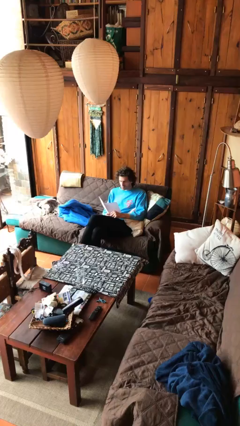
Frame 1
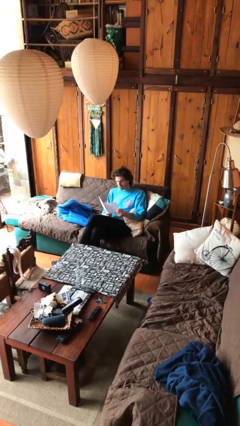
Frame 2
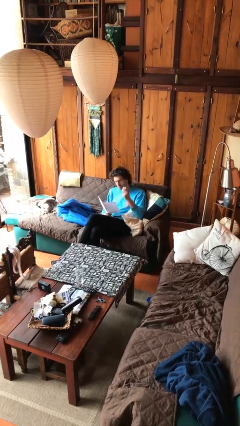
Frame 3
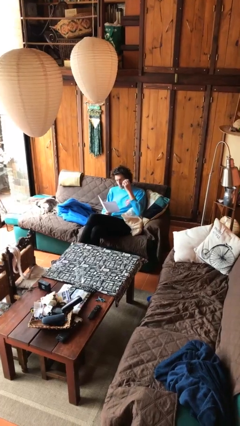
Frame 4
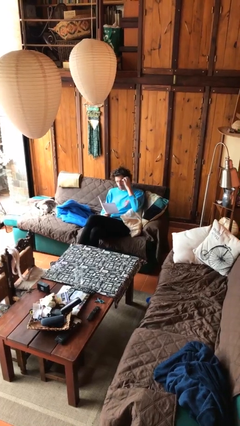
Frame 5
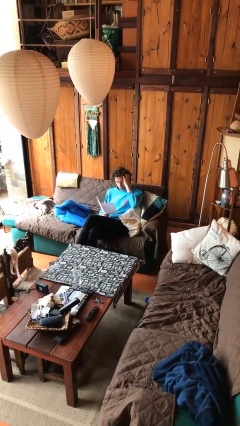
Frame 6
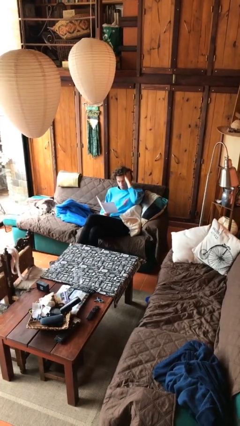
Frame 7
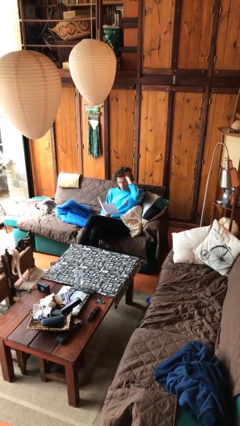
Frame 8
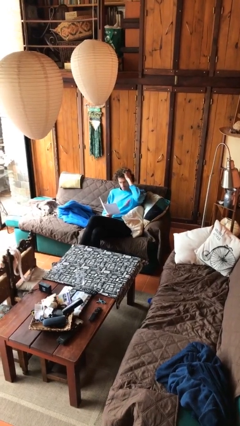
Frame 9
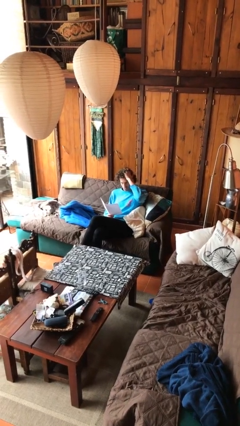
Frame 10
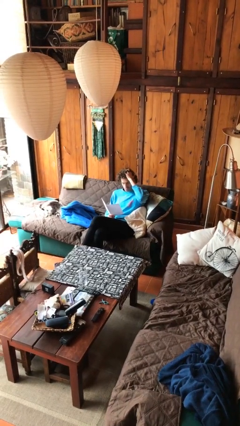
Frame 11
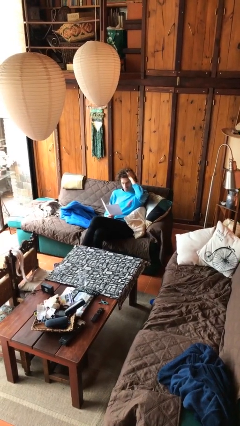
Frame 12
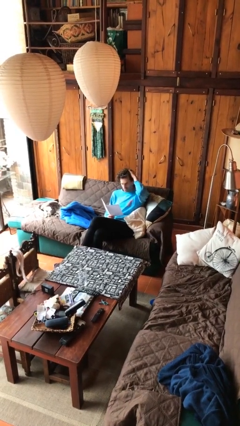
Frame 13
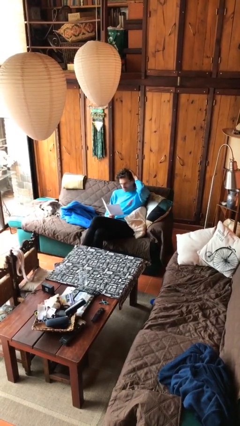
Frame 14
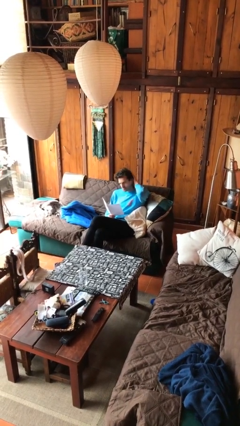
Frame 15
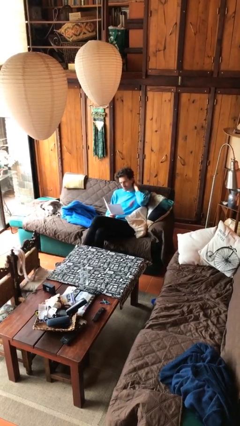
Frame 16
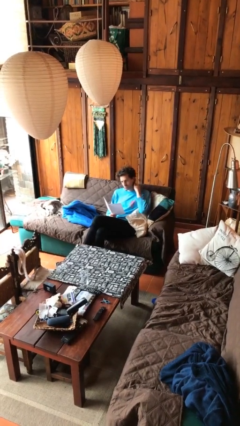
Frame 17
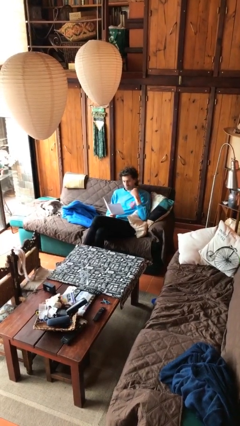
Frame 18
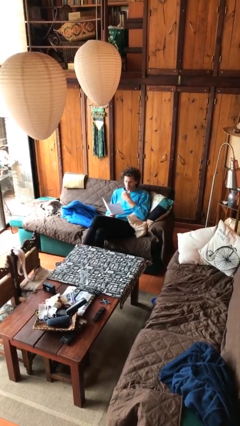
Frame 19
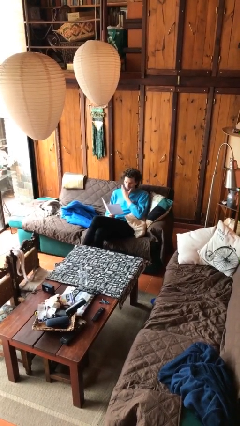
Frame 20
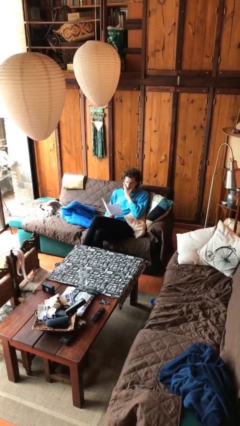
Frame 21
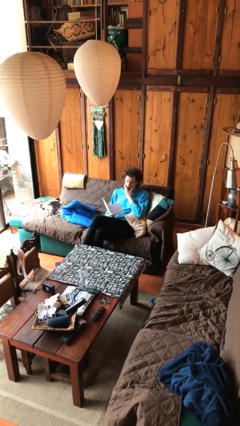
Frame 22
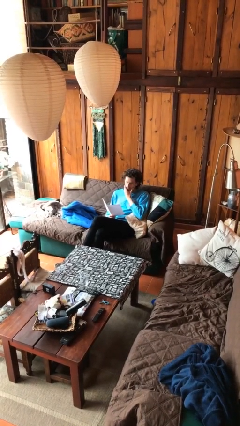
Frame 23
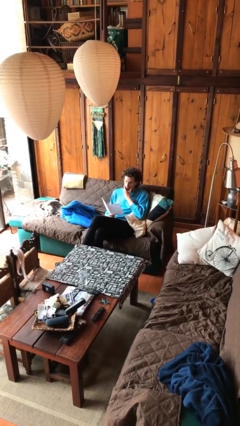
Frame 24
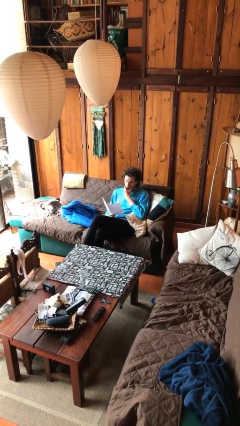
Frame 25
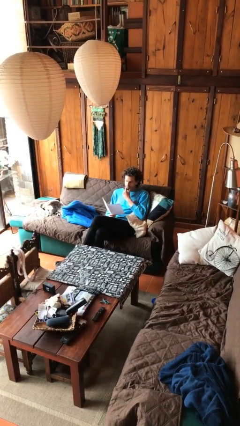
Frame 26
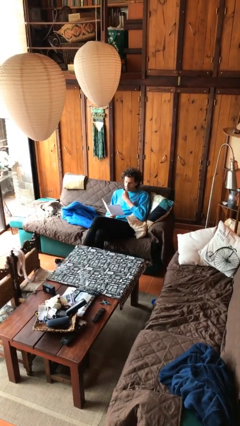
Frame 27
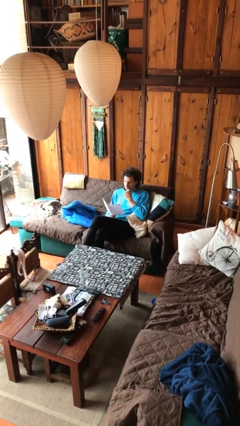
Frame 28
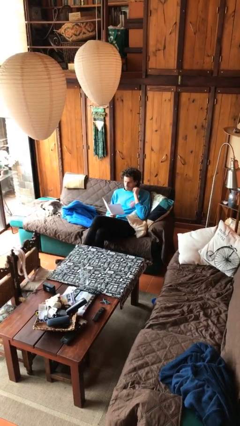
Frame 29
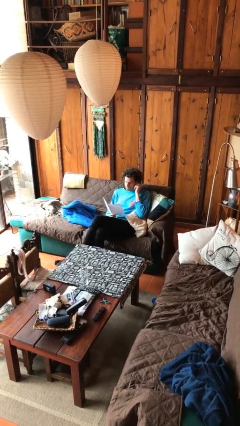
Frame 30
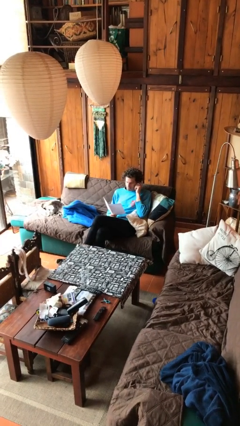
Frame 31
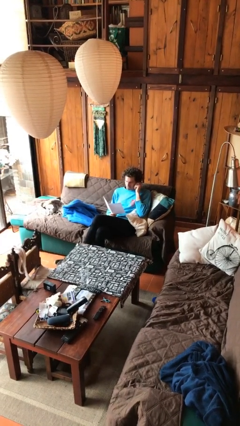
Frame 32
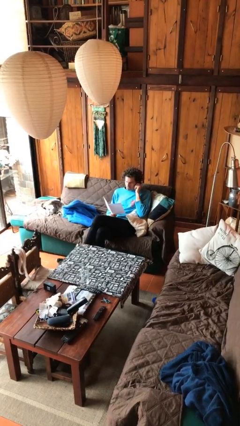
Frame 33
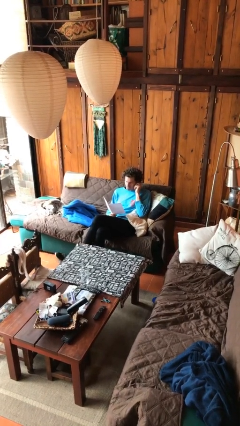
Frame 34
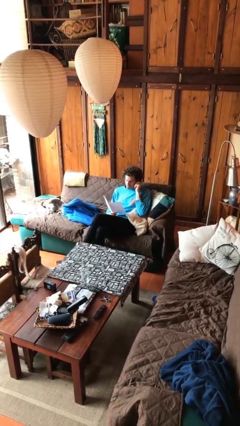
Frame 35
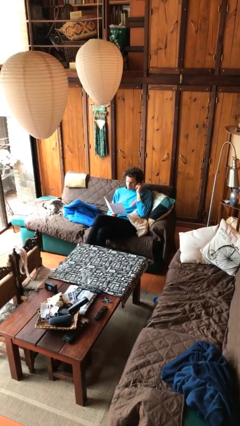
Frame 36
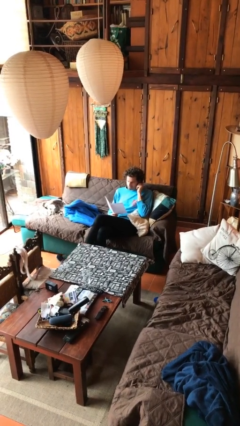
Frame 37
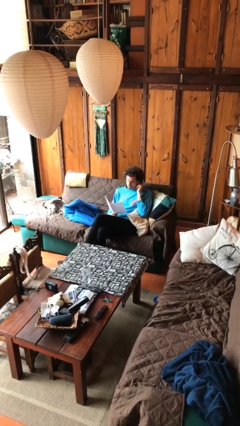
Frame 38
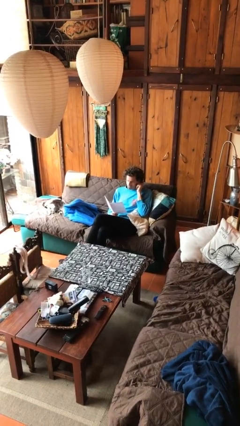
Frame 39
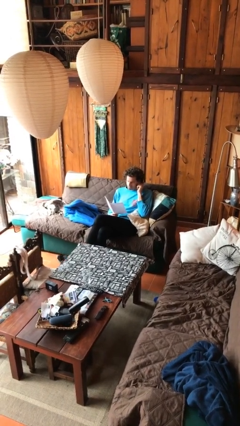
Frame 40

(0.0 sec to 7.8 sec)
person reads document

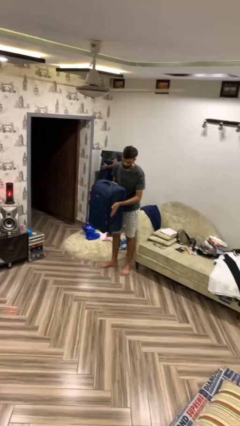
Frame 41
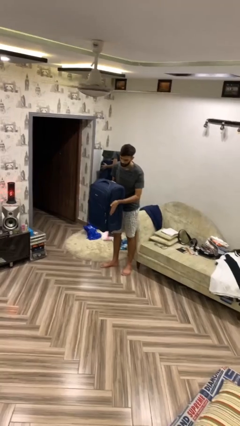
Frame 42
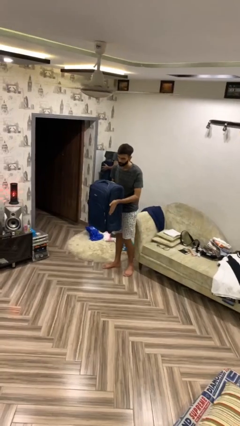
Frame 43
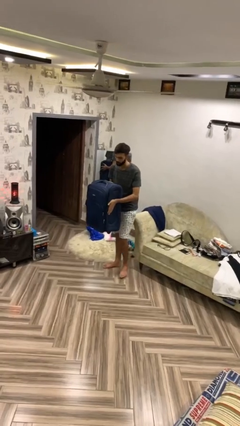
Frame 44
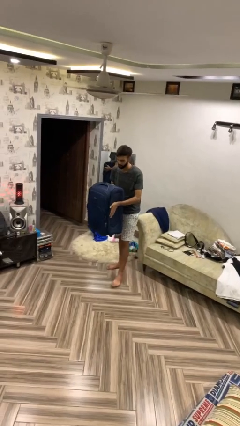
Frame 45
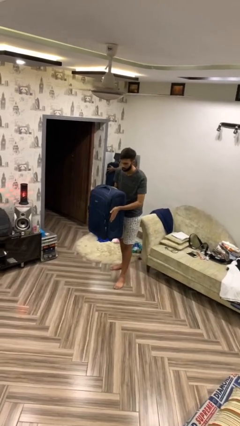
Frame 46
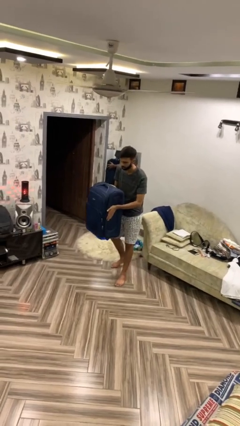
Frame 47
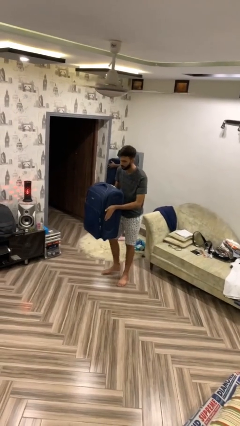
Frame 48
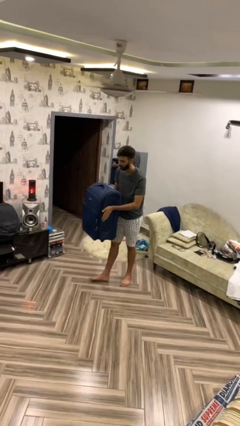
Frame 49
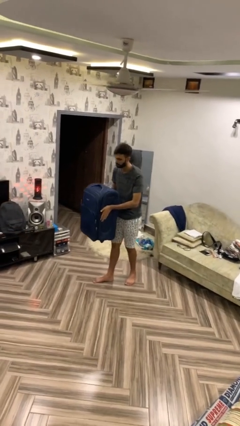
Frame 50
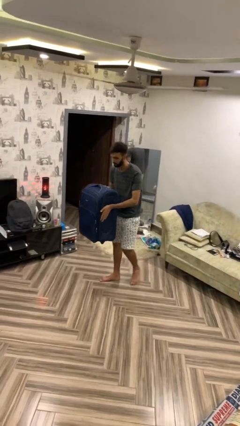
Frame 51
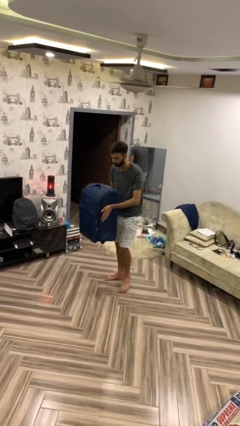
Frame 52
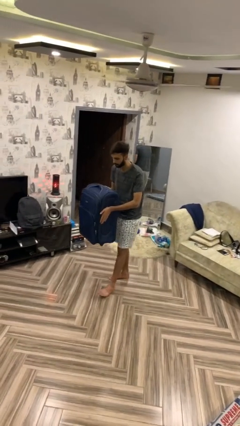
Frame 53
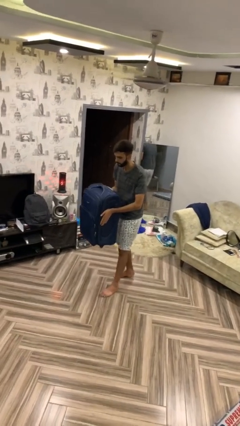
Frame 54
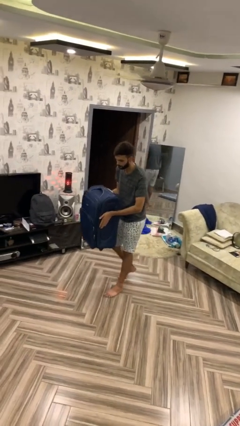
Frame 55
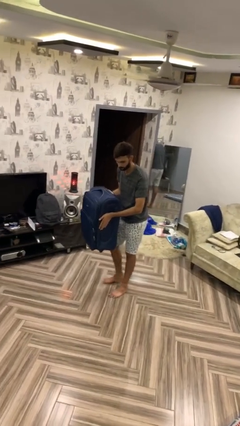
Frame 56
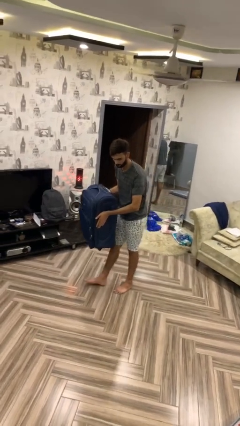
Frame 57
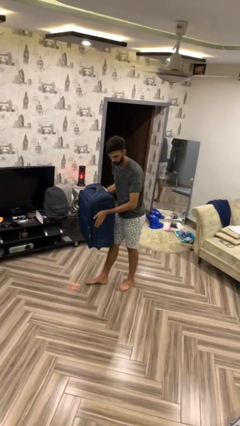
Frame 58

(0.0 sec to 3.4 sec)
person carries heavy object

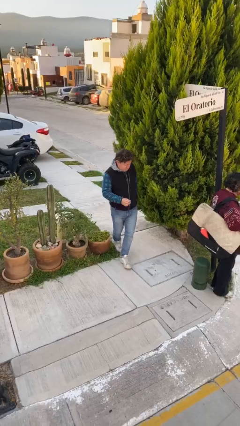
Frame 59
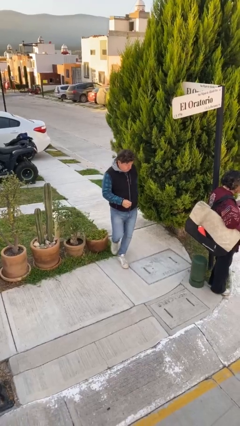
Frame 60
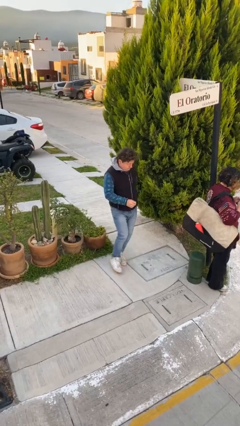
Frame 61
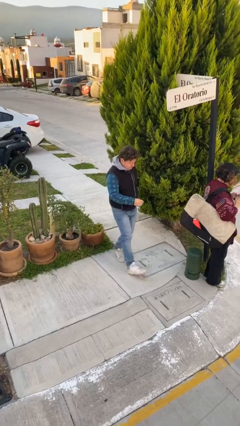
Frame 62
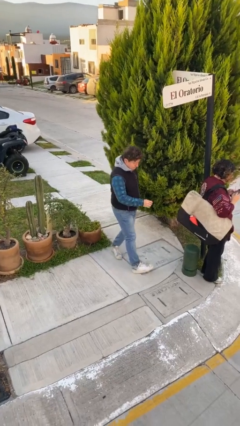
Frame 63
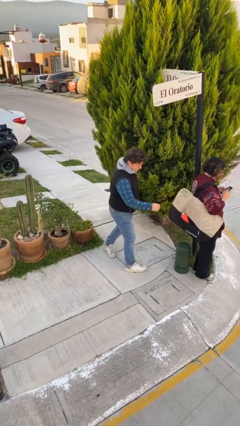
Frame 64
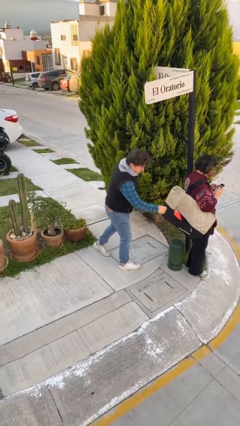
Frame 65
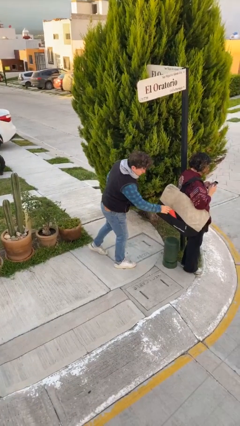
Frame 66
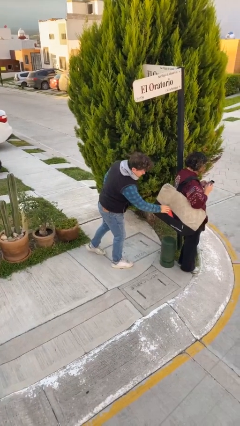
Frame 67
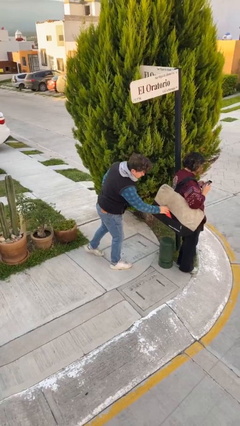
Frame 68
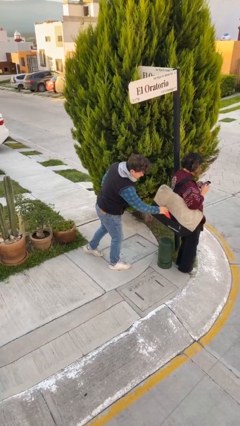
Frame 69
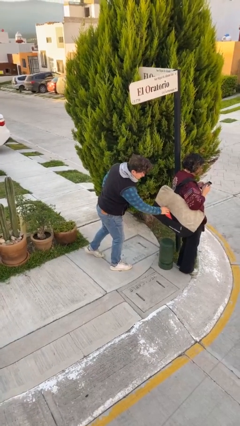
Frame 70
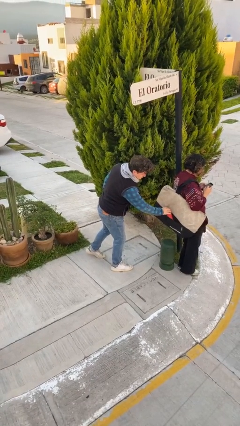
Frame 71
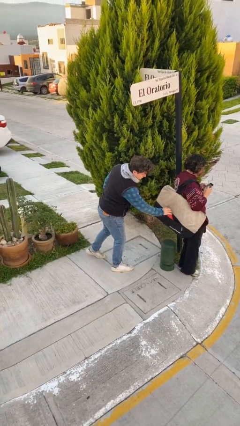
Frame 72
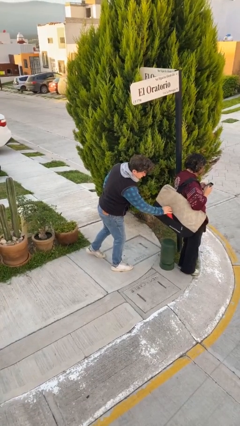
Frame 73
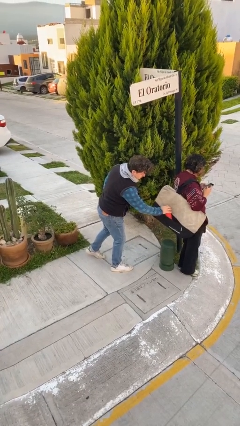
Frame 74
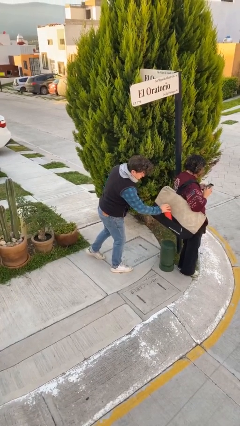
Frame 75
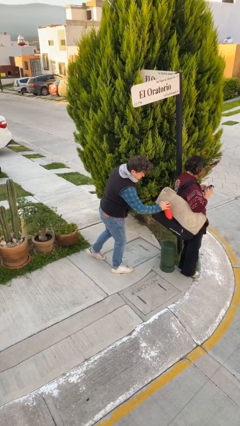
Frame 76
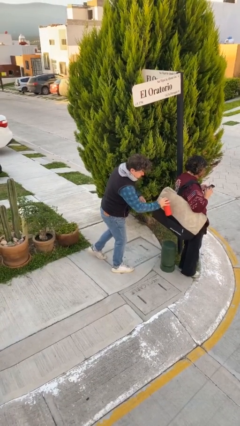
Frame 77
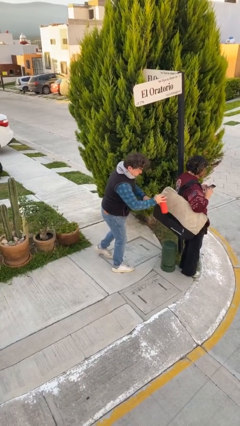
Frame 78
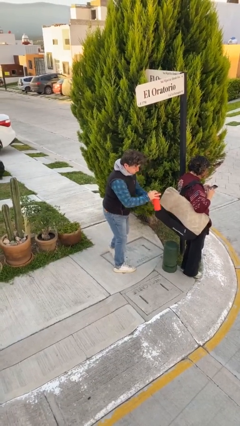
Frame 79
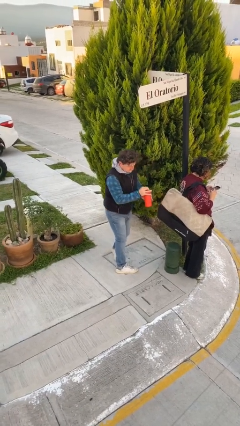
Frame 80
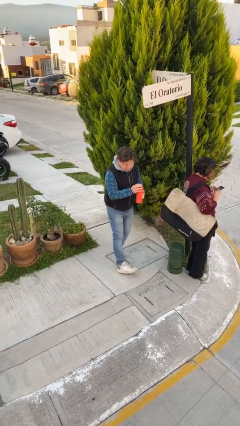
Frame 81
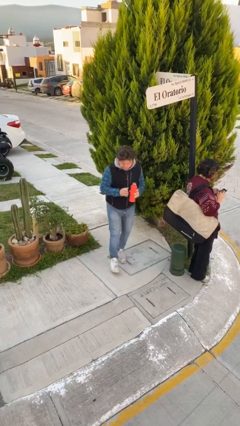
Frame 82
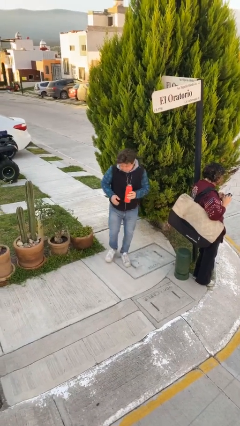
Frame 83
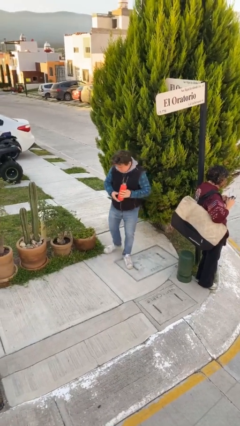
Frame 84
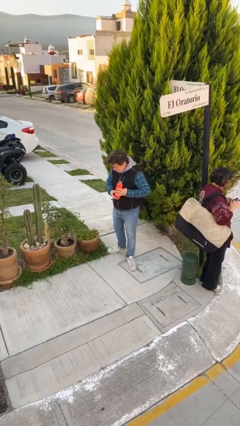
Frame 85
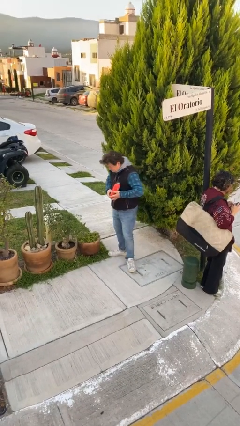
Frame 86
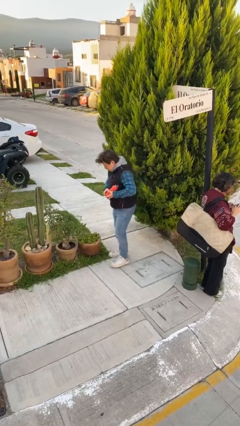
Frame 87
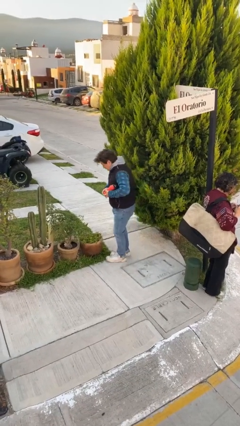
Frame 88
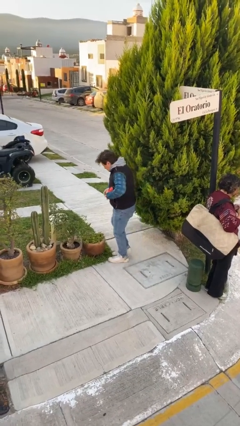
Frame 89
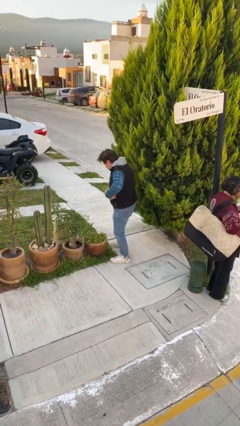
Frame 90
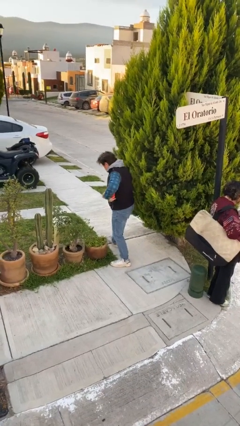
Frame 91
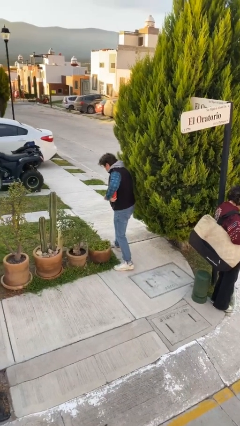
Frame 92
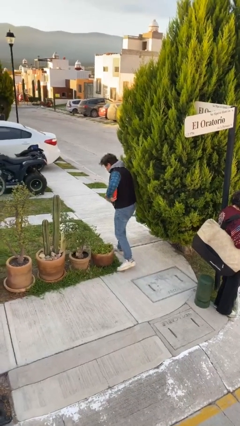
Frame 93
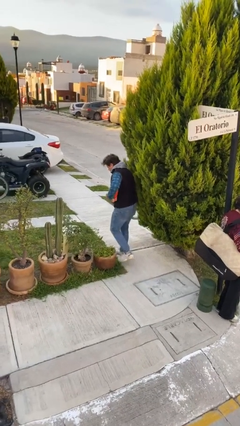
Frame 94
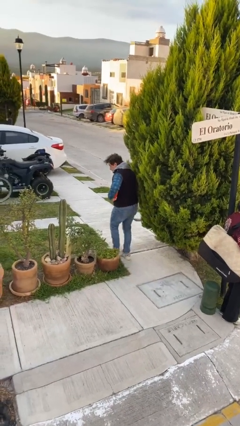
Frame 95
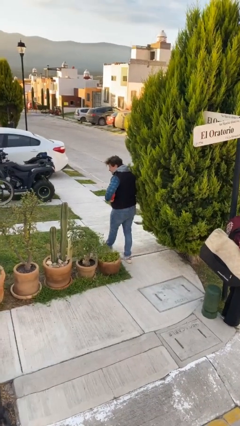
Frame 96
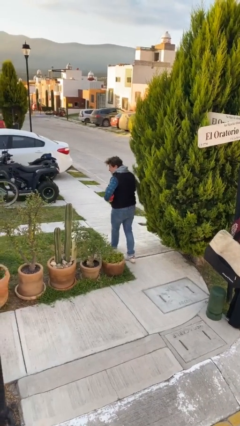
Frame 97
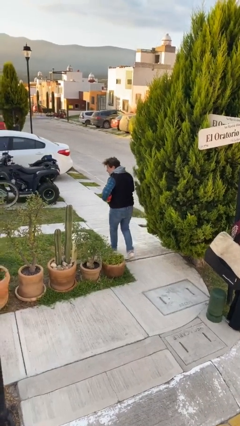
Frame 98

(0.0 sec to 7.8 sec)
person steals object from person
